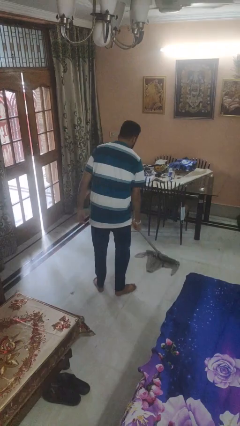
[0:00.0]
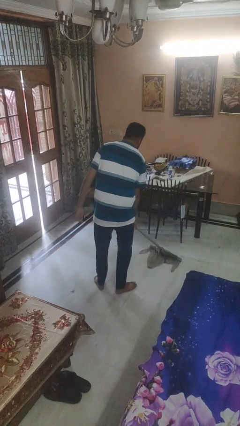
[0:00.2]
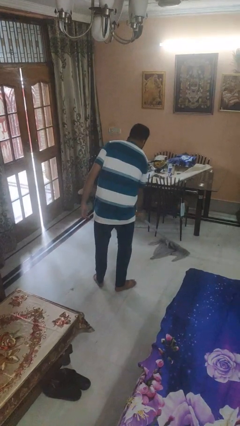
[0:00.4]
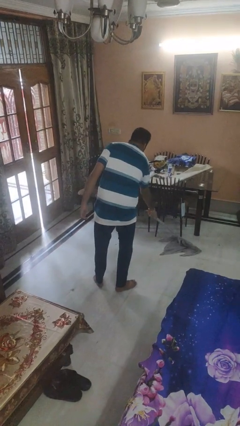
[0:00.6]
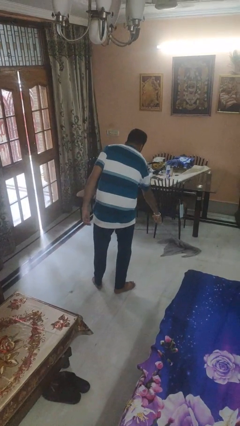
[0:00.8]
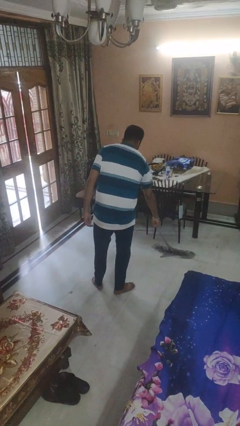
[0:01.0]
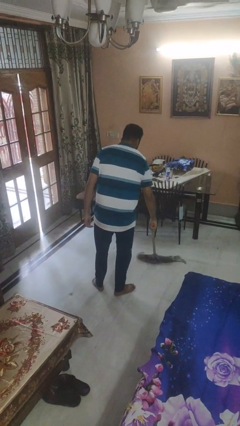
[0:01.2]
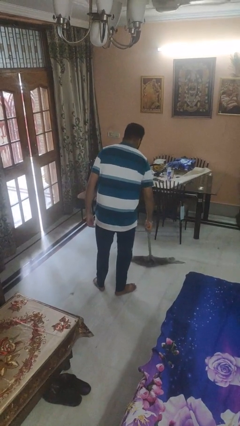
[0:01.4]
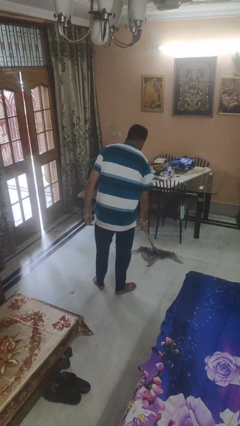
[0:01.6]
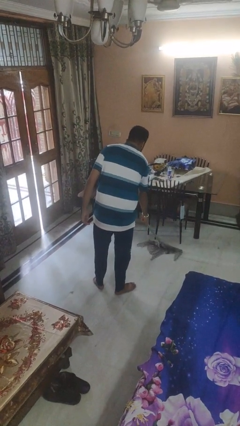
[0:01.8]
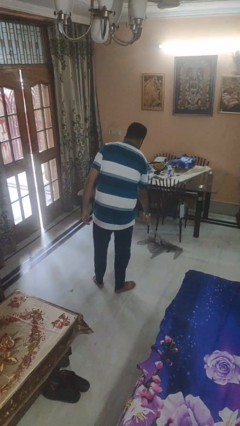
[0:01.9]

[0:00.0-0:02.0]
person mops

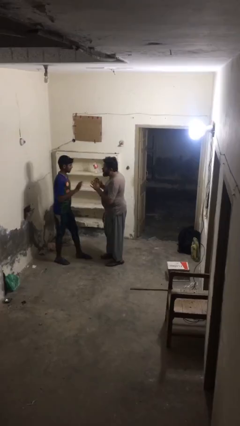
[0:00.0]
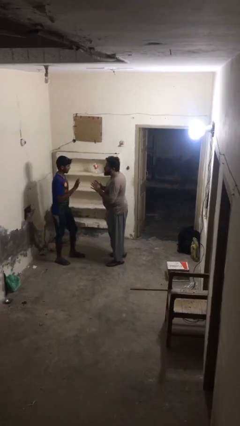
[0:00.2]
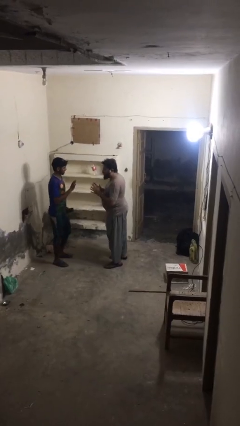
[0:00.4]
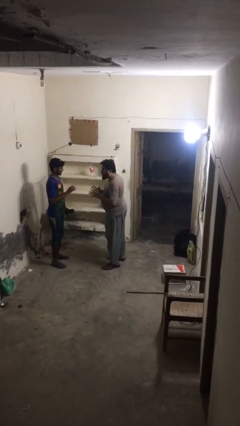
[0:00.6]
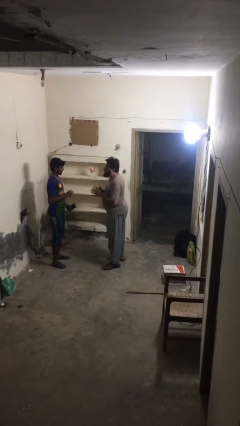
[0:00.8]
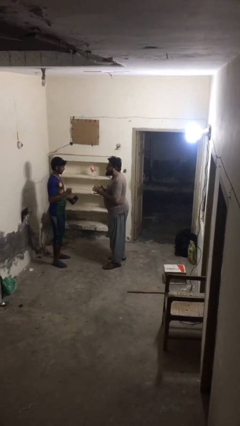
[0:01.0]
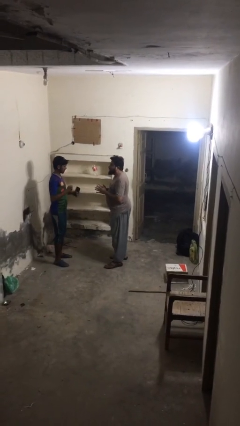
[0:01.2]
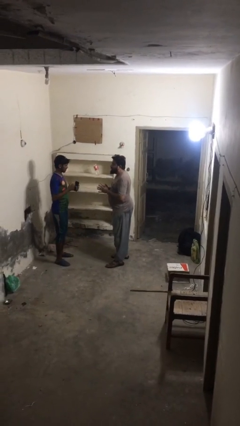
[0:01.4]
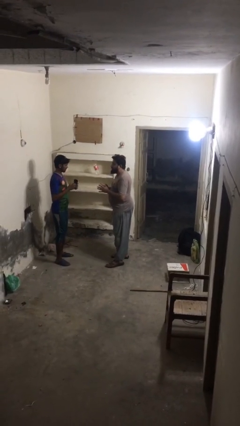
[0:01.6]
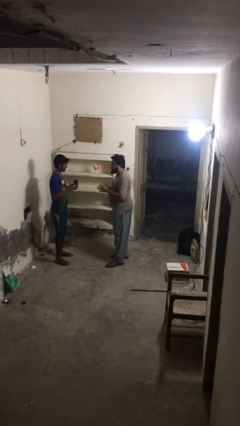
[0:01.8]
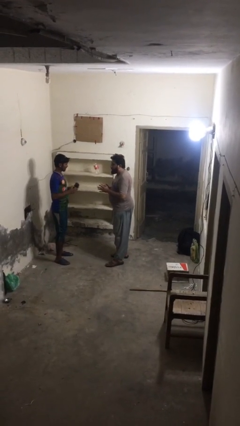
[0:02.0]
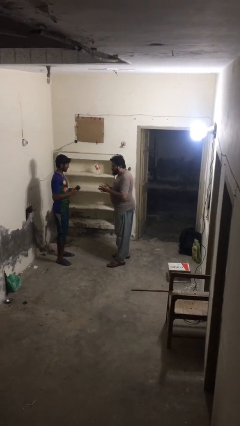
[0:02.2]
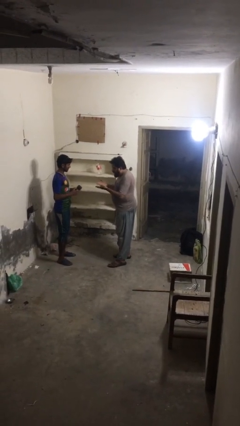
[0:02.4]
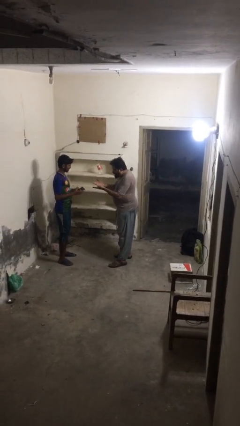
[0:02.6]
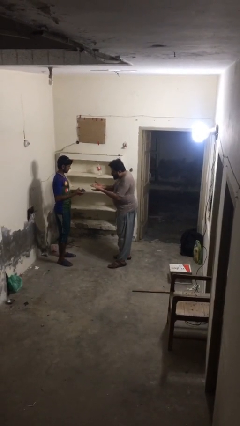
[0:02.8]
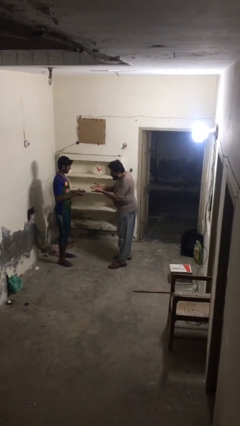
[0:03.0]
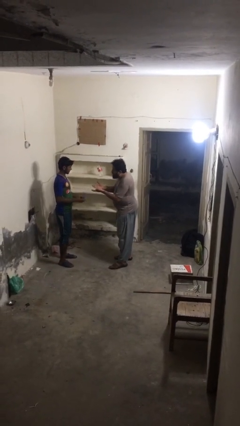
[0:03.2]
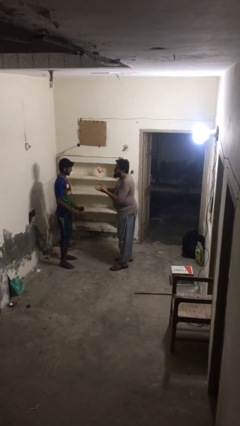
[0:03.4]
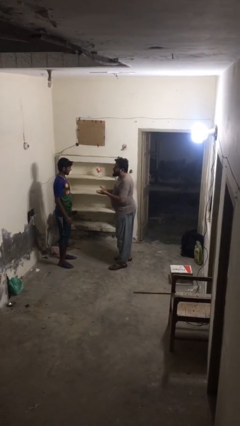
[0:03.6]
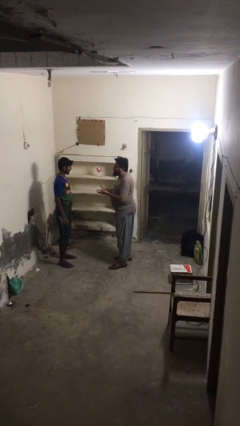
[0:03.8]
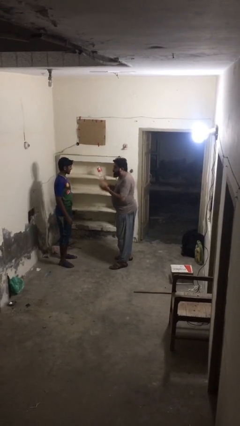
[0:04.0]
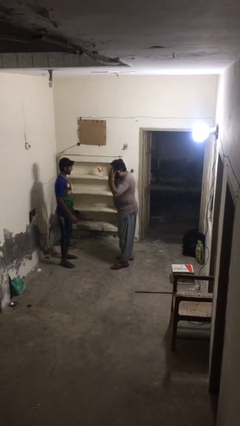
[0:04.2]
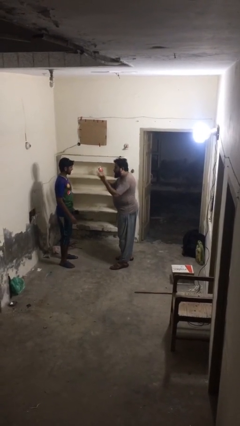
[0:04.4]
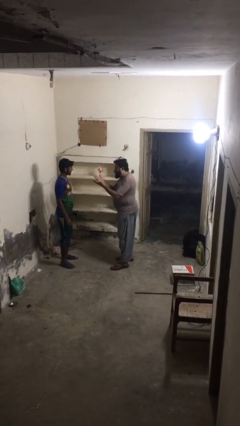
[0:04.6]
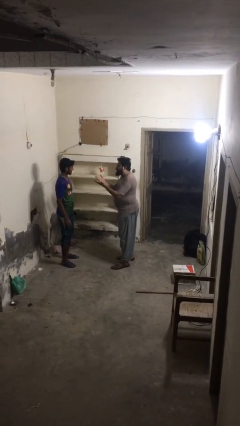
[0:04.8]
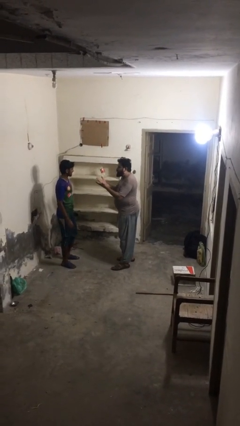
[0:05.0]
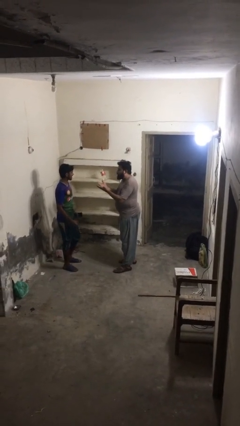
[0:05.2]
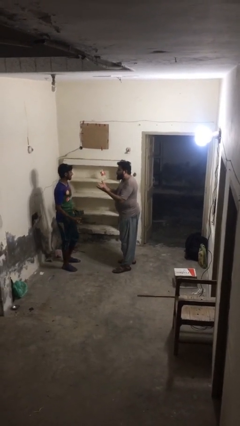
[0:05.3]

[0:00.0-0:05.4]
person talks to person

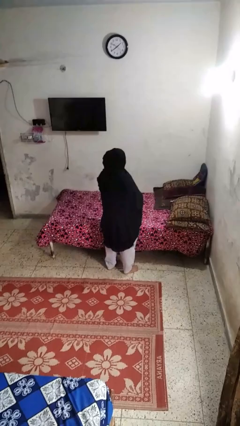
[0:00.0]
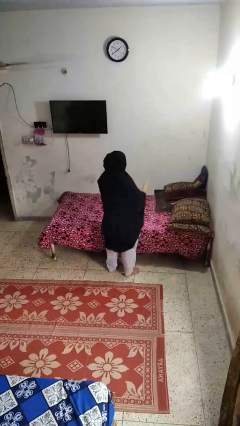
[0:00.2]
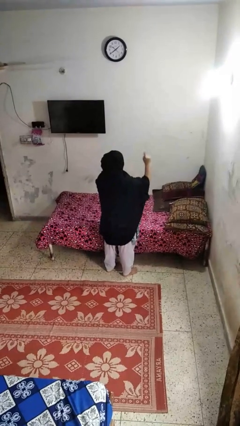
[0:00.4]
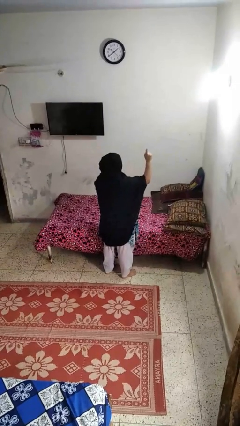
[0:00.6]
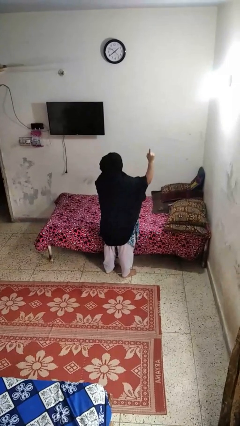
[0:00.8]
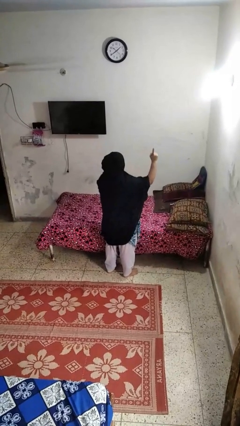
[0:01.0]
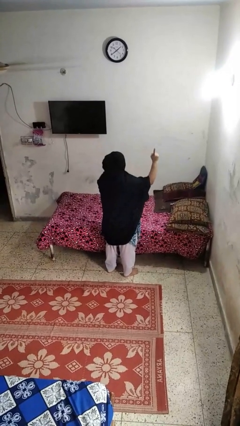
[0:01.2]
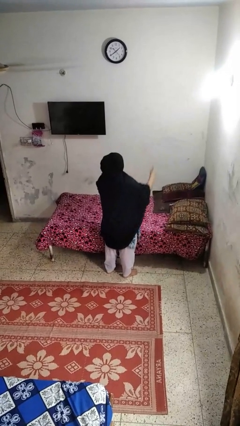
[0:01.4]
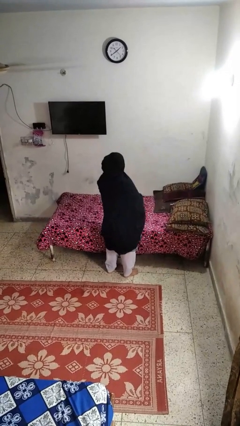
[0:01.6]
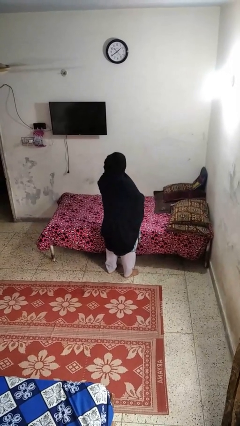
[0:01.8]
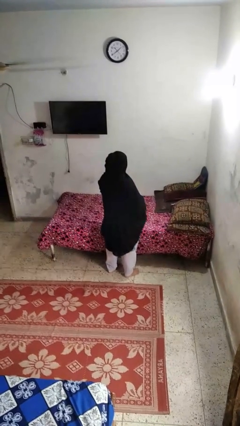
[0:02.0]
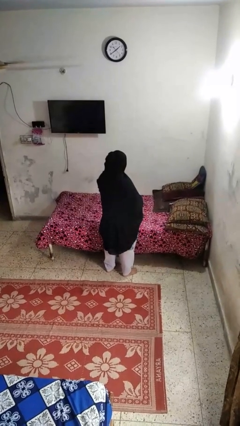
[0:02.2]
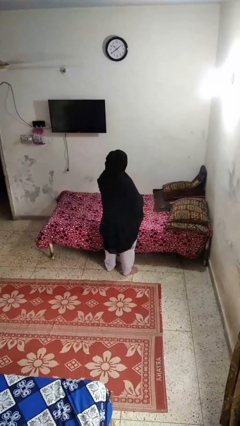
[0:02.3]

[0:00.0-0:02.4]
person gestures number one

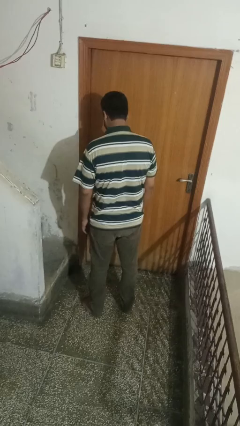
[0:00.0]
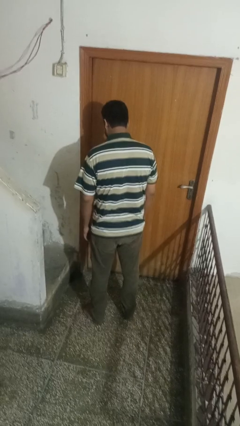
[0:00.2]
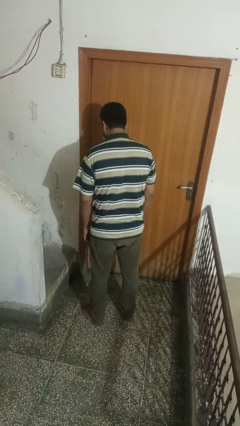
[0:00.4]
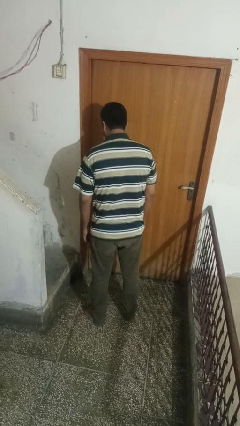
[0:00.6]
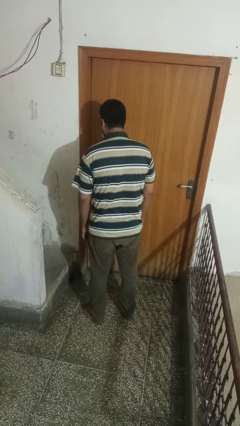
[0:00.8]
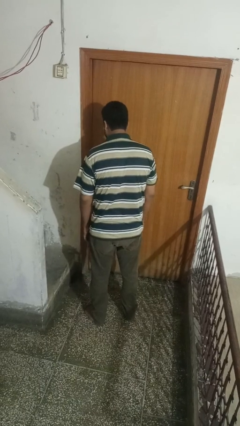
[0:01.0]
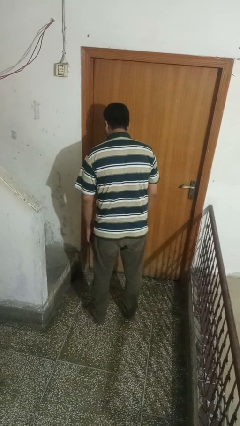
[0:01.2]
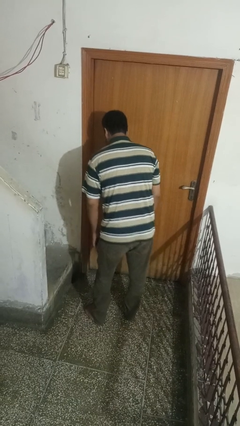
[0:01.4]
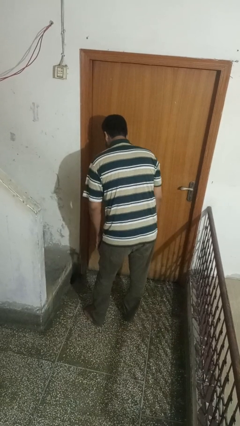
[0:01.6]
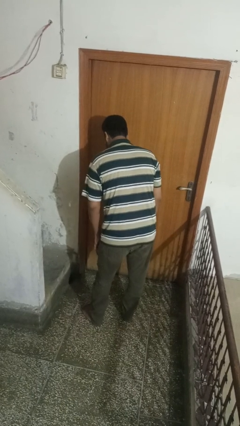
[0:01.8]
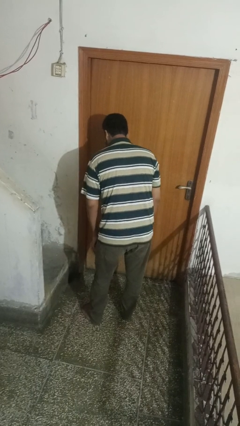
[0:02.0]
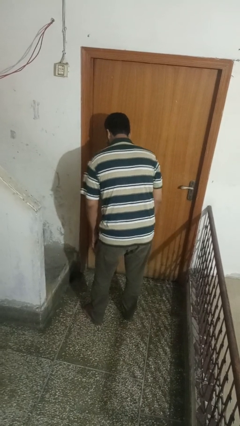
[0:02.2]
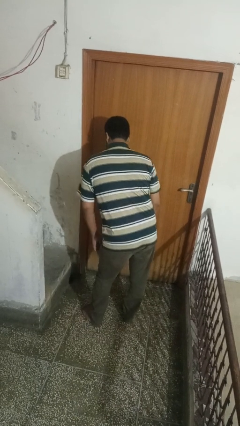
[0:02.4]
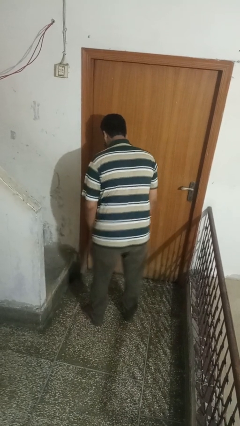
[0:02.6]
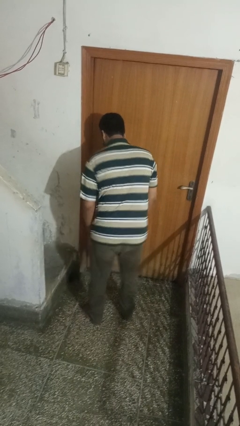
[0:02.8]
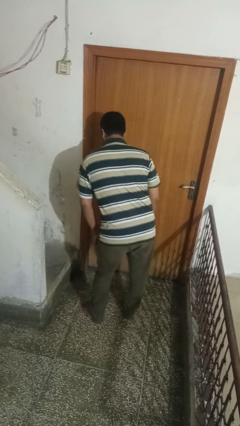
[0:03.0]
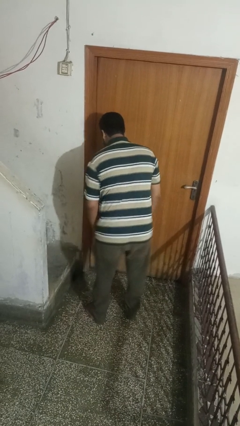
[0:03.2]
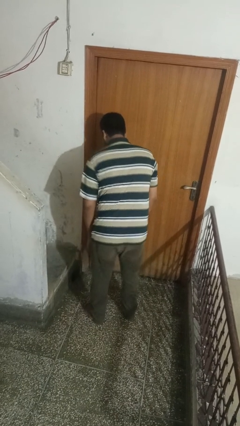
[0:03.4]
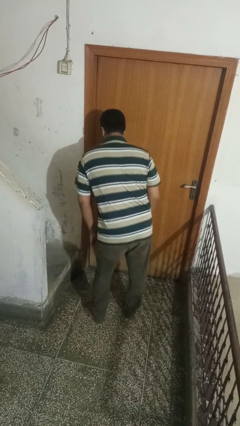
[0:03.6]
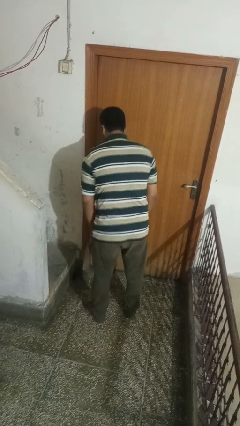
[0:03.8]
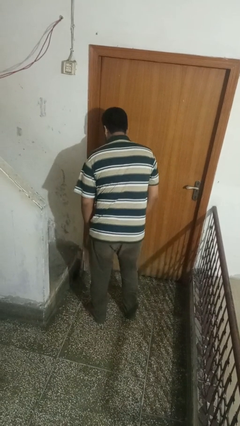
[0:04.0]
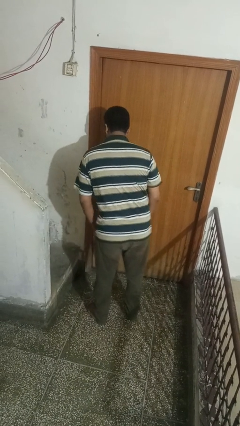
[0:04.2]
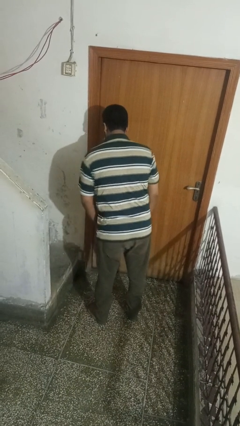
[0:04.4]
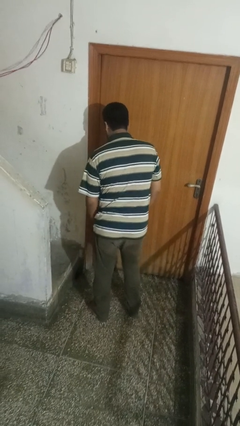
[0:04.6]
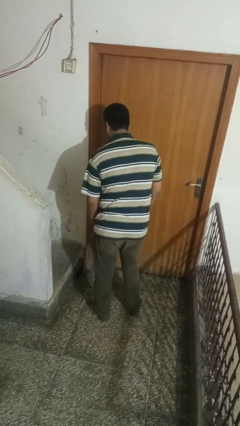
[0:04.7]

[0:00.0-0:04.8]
person wiggles hips

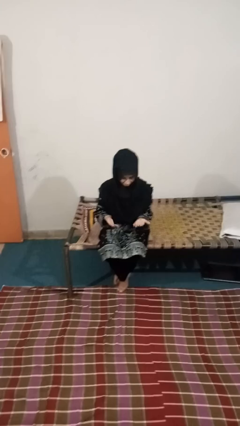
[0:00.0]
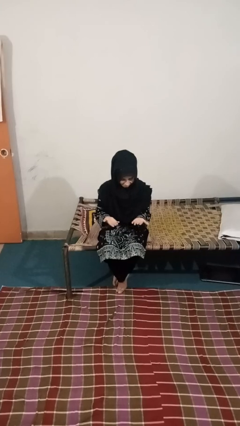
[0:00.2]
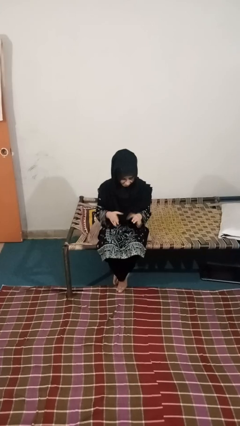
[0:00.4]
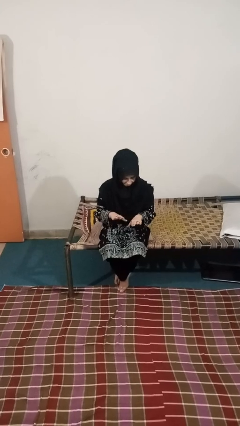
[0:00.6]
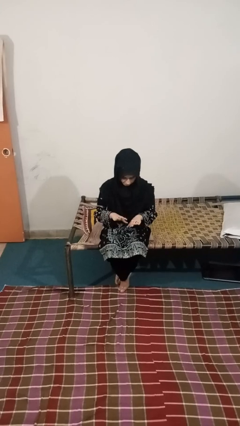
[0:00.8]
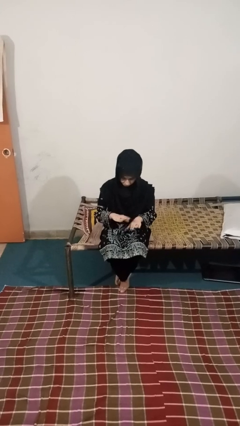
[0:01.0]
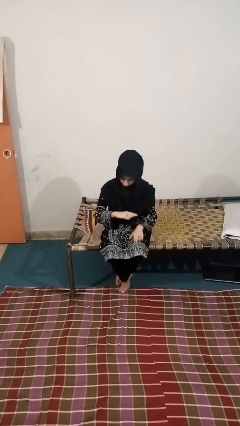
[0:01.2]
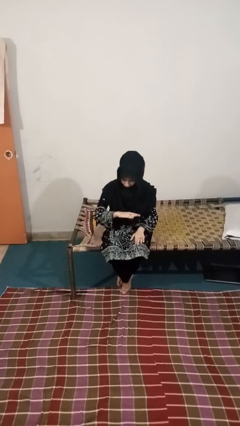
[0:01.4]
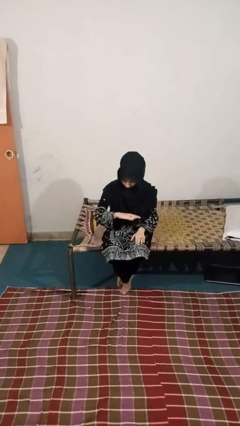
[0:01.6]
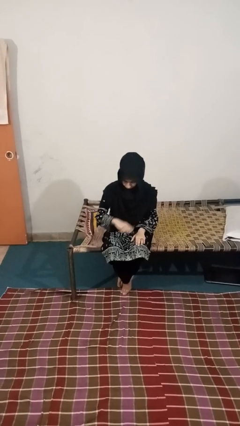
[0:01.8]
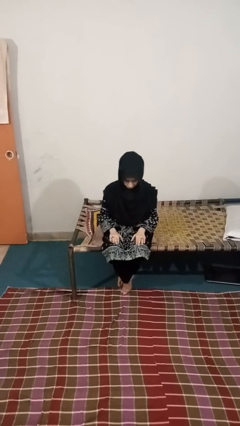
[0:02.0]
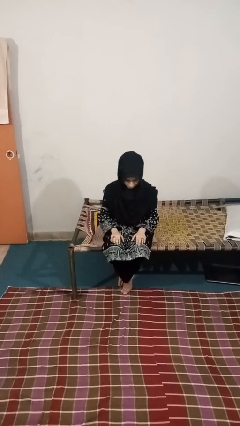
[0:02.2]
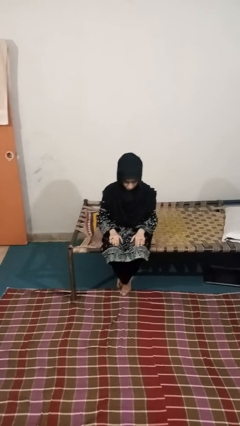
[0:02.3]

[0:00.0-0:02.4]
person looks at hands in lap

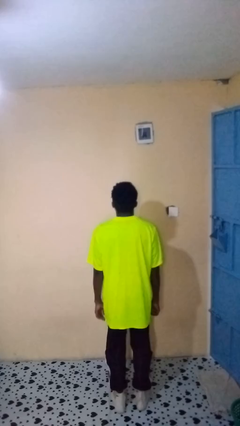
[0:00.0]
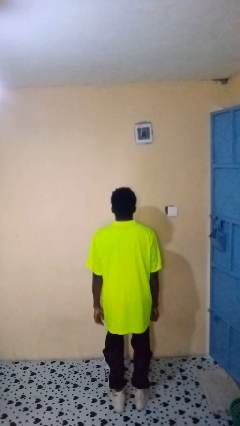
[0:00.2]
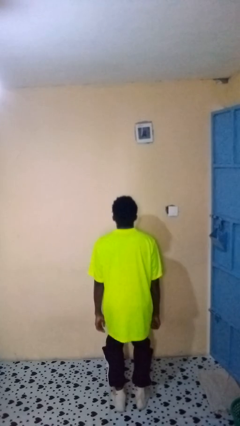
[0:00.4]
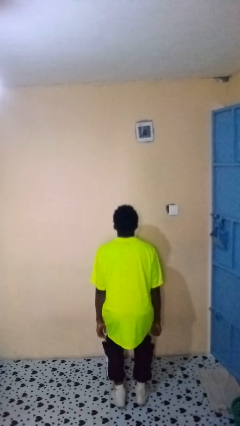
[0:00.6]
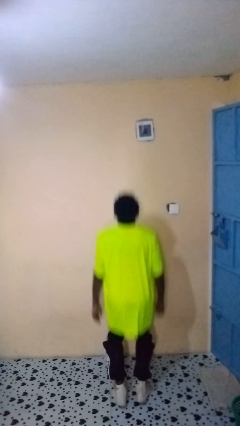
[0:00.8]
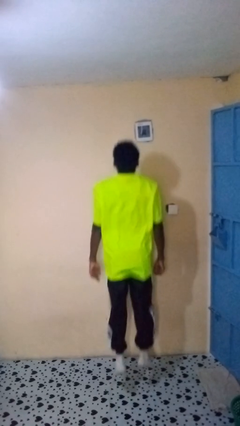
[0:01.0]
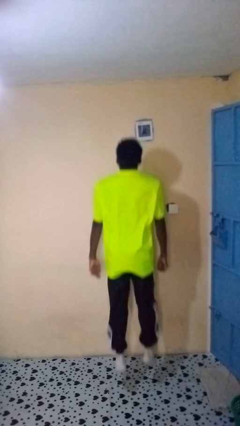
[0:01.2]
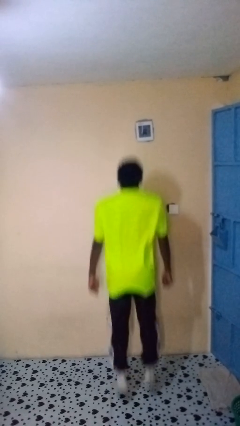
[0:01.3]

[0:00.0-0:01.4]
person jumps
